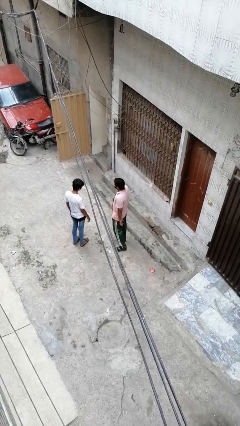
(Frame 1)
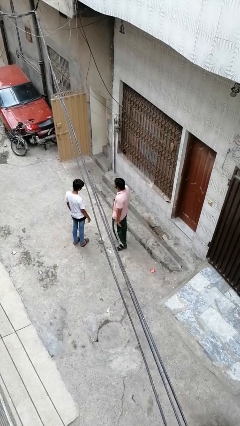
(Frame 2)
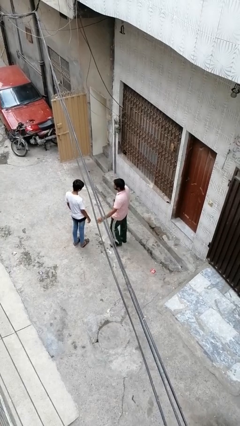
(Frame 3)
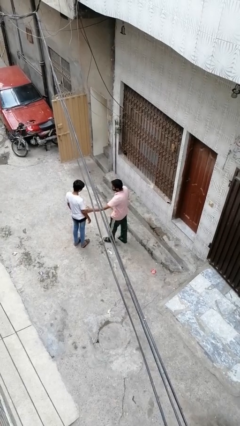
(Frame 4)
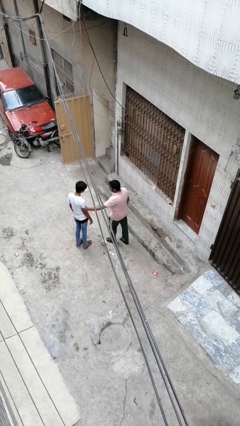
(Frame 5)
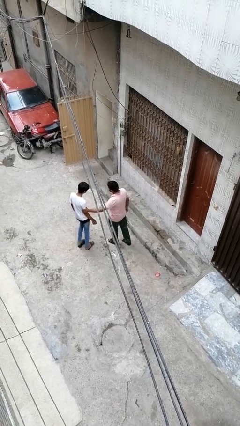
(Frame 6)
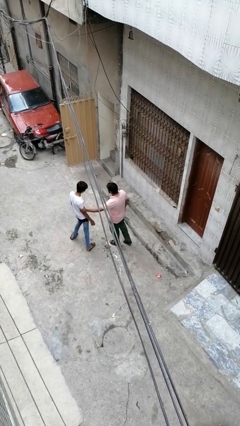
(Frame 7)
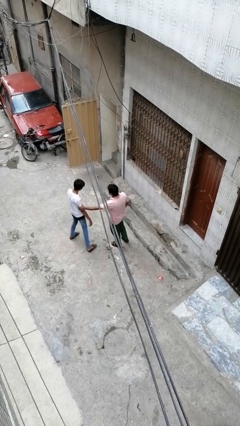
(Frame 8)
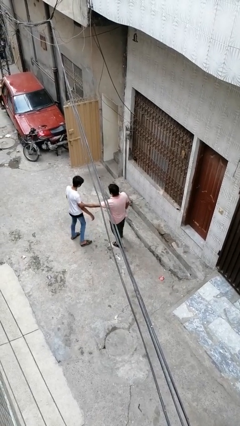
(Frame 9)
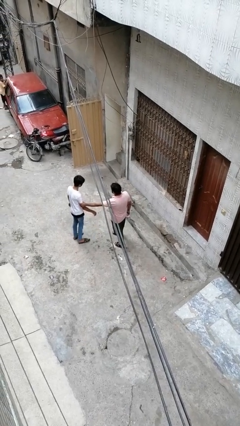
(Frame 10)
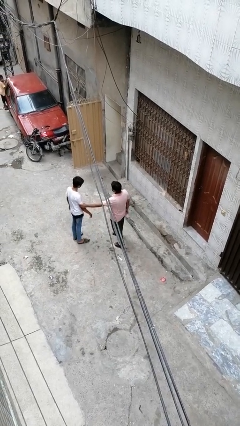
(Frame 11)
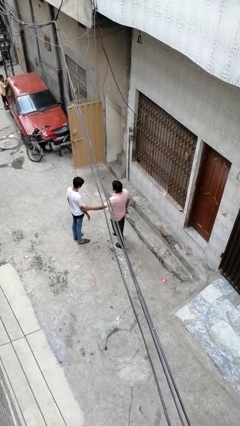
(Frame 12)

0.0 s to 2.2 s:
person grabs person by bicep

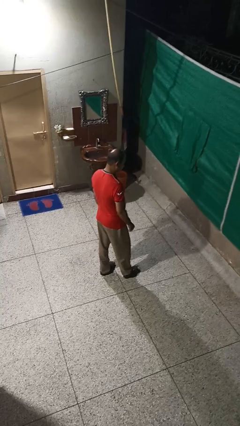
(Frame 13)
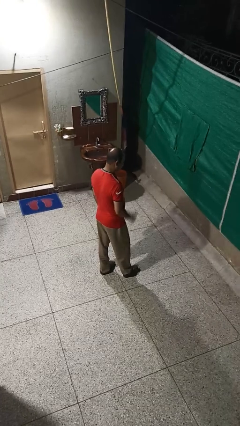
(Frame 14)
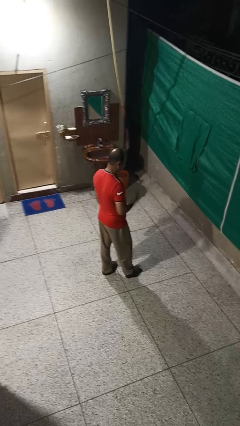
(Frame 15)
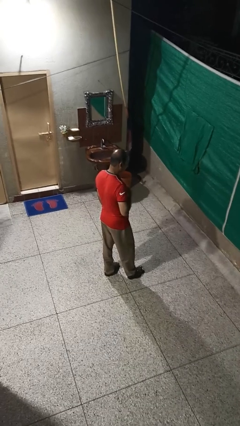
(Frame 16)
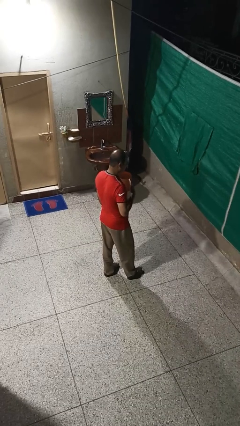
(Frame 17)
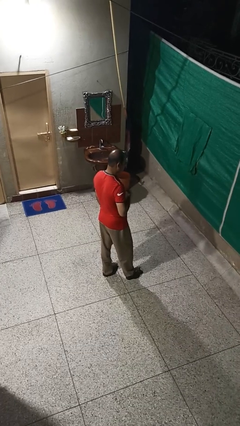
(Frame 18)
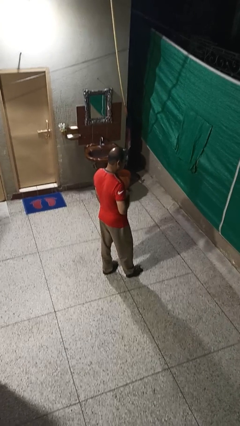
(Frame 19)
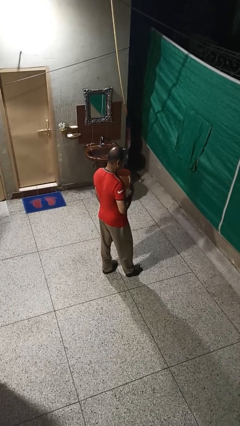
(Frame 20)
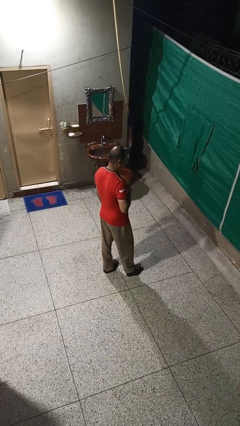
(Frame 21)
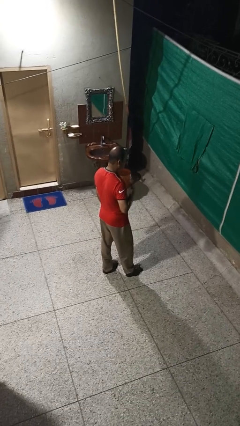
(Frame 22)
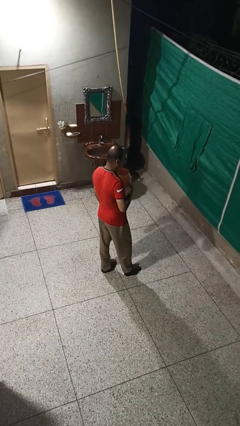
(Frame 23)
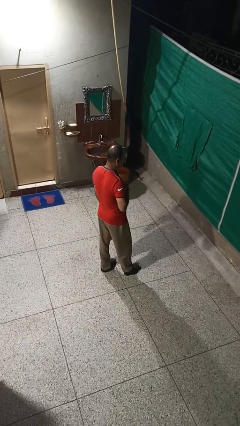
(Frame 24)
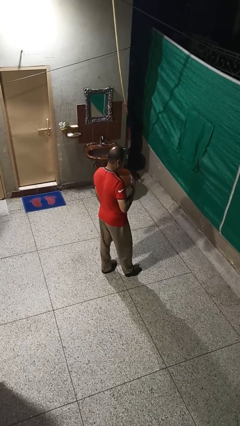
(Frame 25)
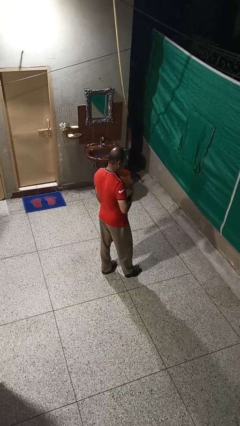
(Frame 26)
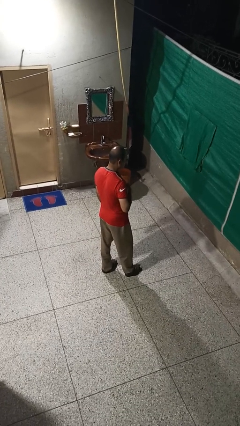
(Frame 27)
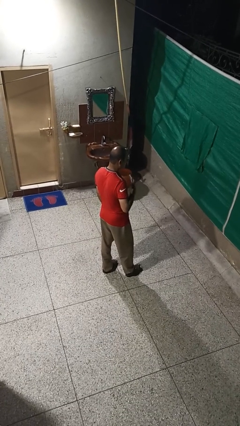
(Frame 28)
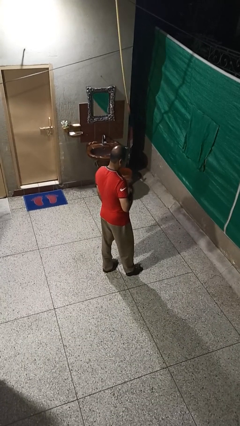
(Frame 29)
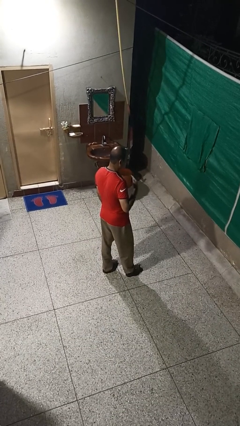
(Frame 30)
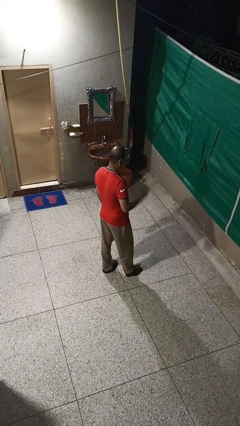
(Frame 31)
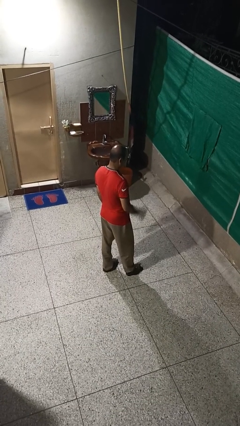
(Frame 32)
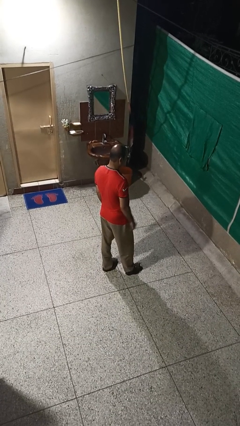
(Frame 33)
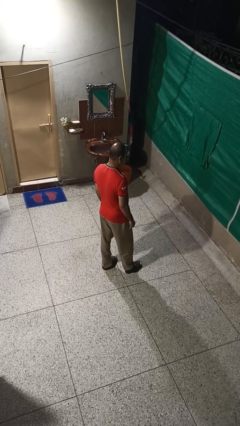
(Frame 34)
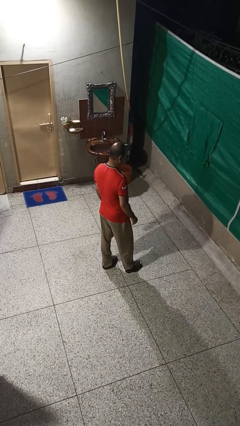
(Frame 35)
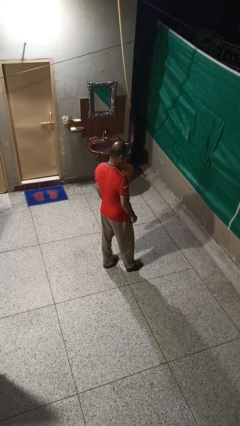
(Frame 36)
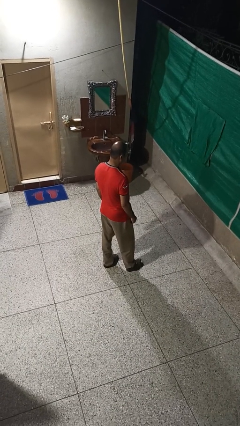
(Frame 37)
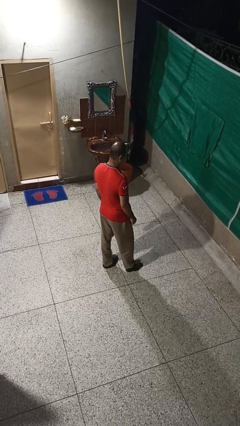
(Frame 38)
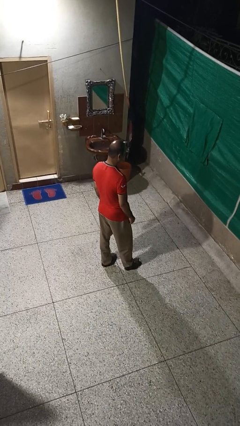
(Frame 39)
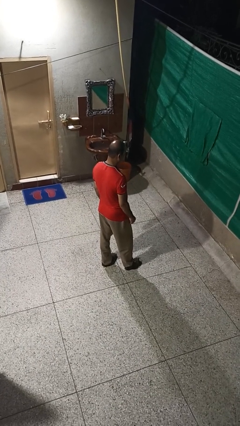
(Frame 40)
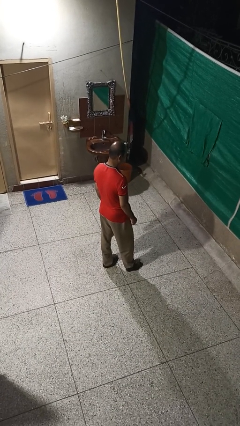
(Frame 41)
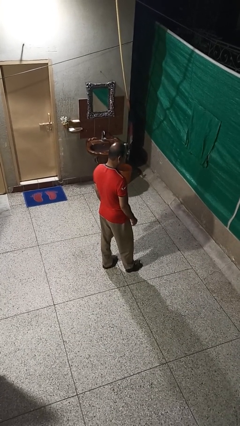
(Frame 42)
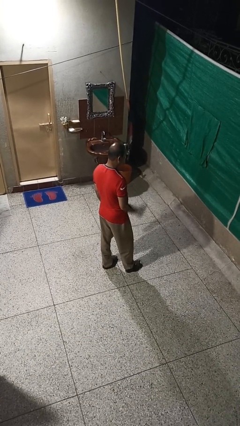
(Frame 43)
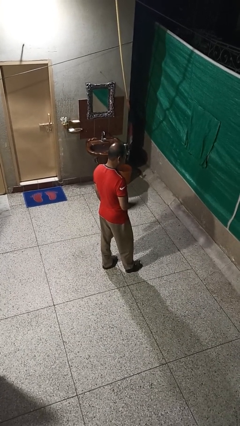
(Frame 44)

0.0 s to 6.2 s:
person drums on chest

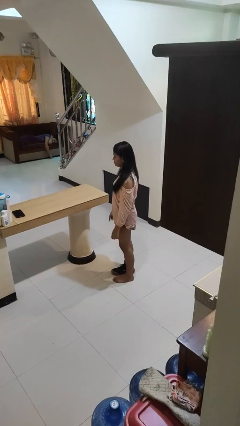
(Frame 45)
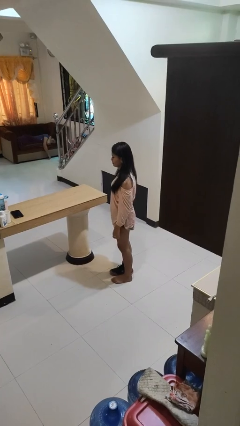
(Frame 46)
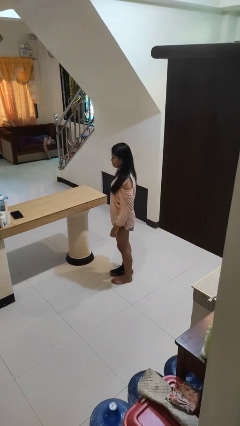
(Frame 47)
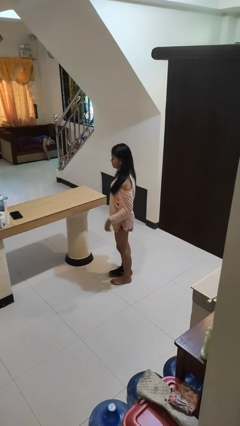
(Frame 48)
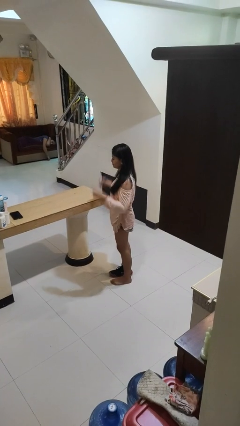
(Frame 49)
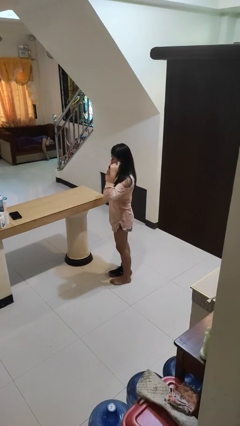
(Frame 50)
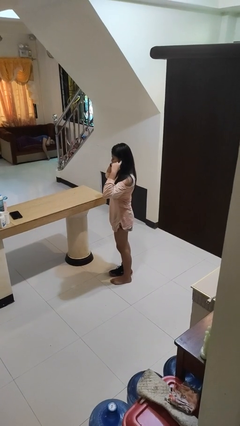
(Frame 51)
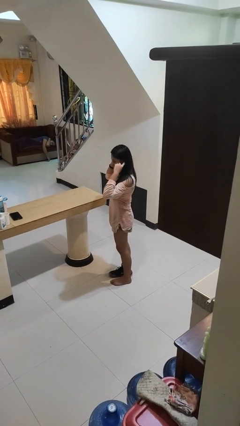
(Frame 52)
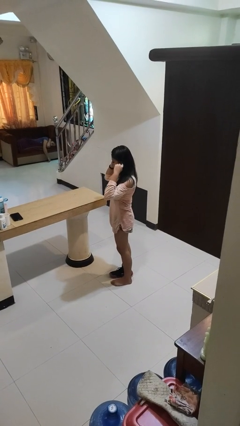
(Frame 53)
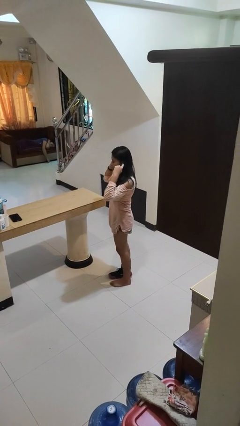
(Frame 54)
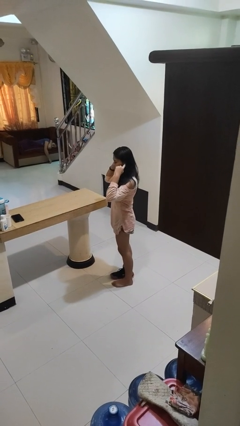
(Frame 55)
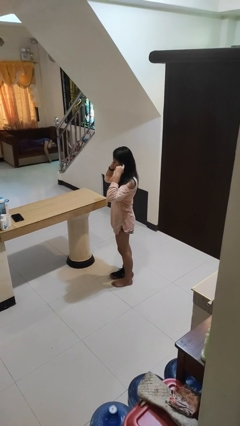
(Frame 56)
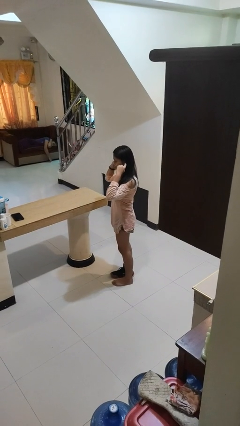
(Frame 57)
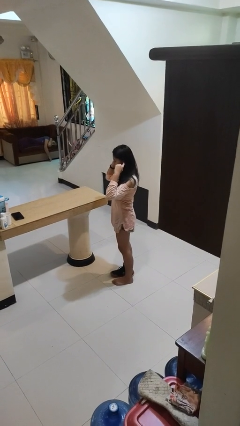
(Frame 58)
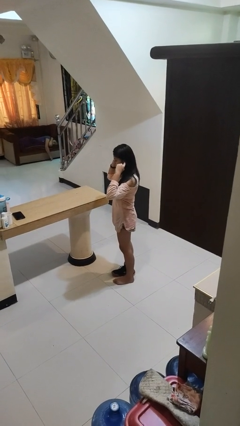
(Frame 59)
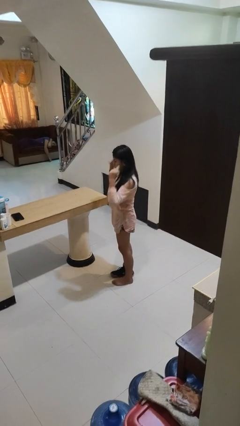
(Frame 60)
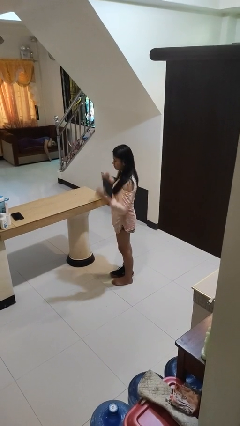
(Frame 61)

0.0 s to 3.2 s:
person puts fingers in ear

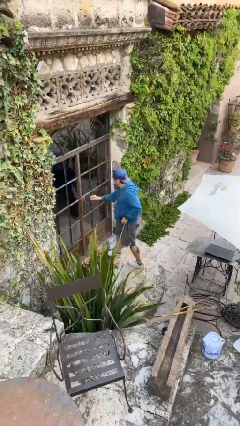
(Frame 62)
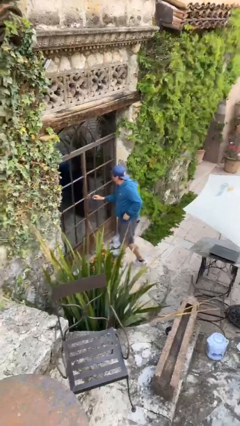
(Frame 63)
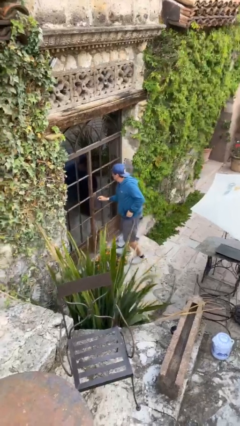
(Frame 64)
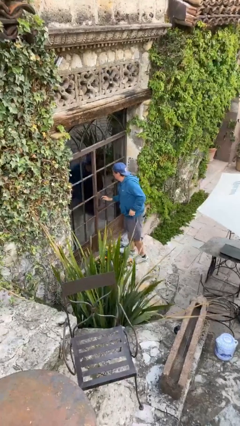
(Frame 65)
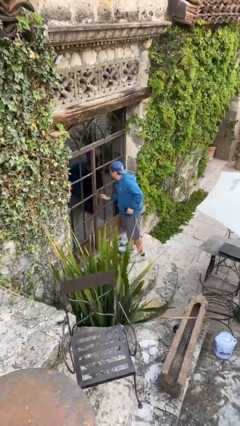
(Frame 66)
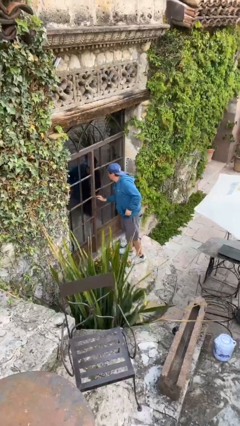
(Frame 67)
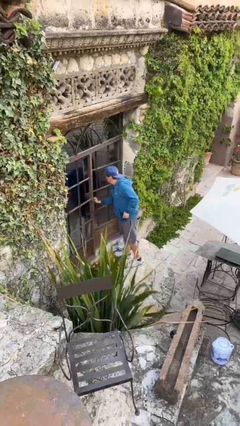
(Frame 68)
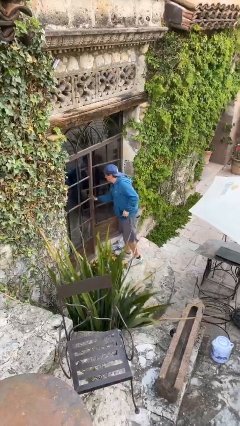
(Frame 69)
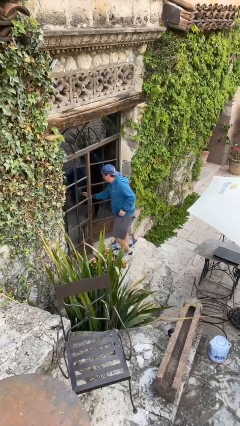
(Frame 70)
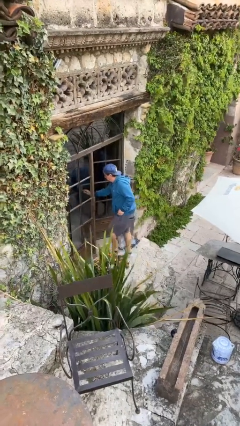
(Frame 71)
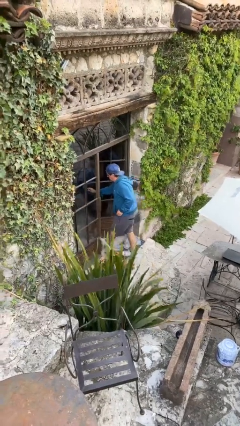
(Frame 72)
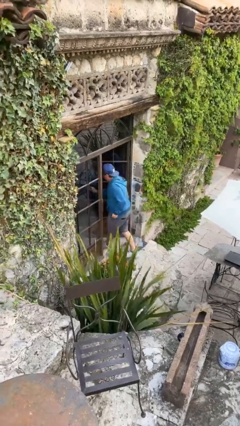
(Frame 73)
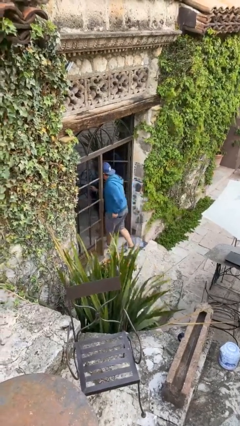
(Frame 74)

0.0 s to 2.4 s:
person opens facility door

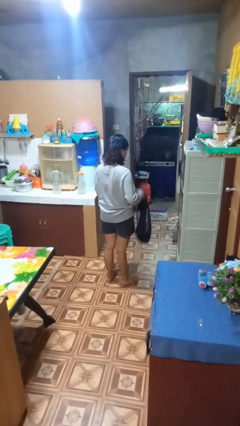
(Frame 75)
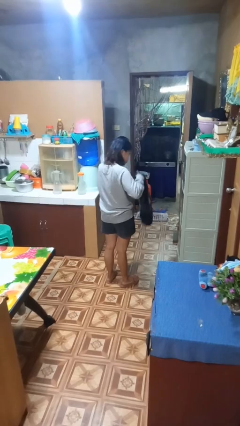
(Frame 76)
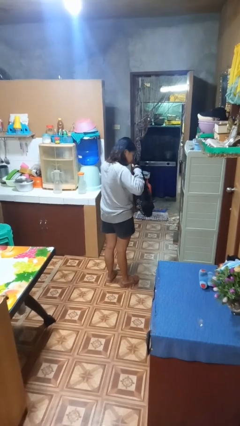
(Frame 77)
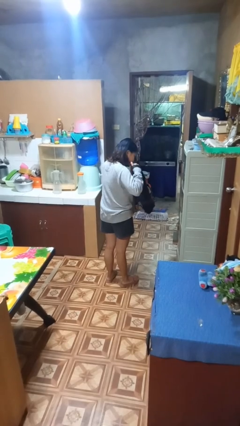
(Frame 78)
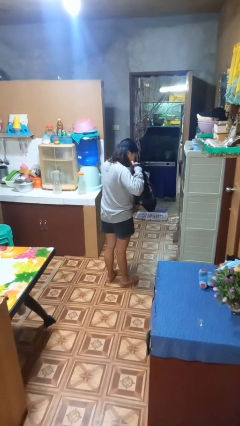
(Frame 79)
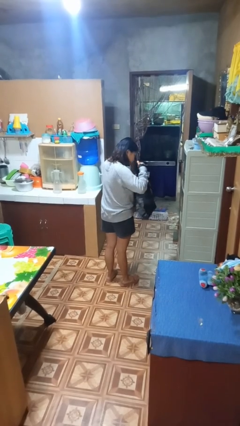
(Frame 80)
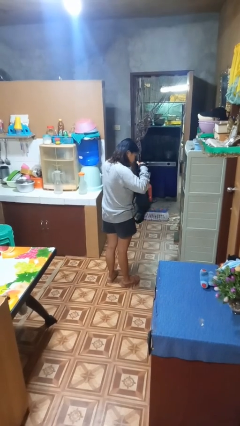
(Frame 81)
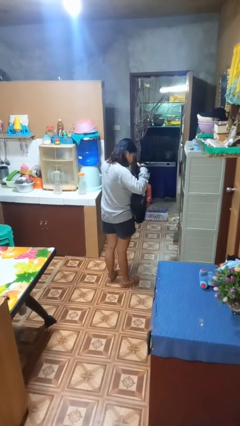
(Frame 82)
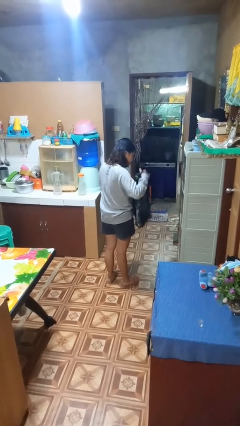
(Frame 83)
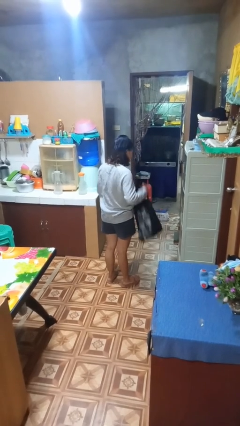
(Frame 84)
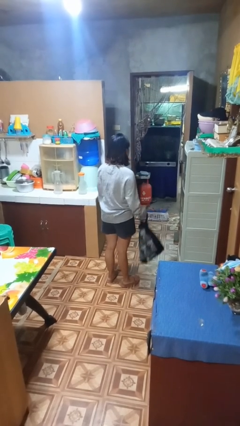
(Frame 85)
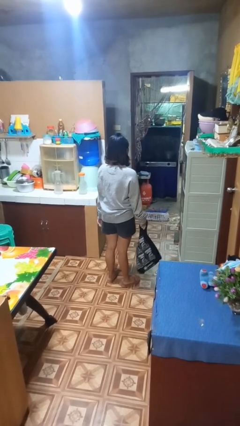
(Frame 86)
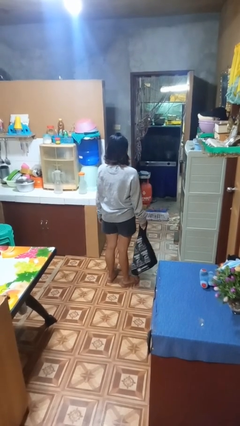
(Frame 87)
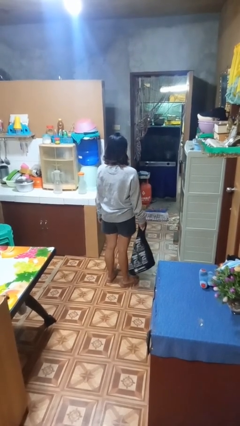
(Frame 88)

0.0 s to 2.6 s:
person searches in bag

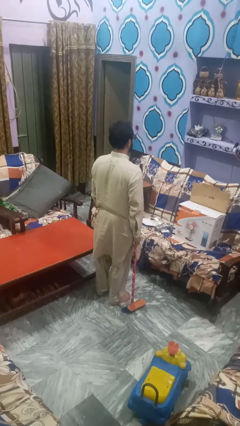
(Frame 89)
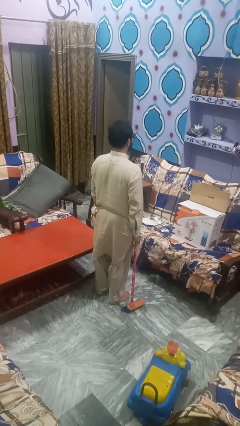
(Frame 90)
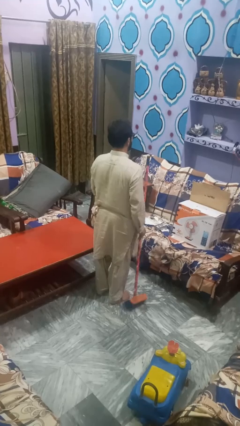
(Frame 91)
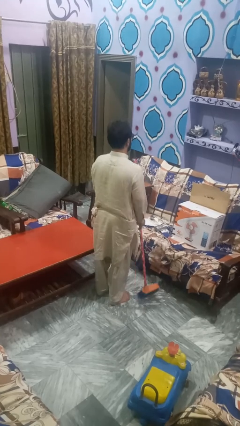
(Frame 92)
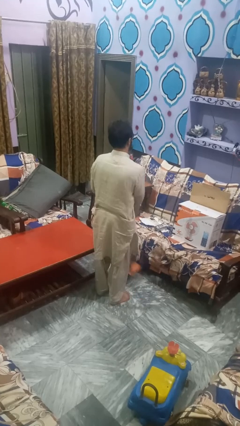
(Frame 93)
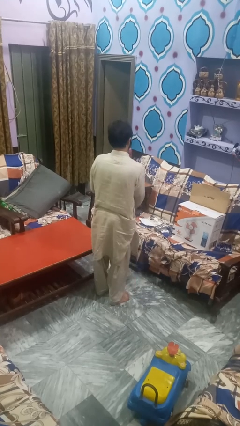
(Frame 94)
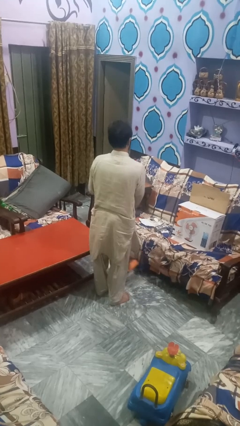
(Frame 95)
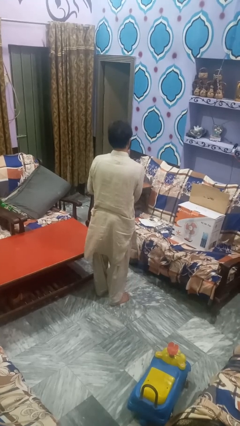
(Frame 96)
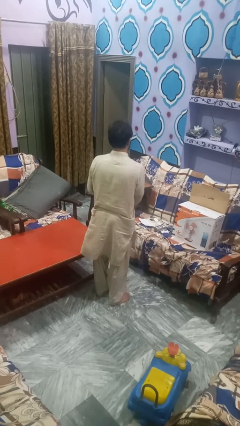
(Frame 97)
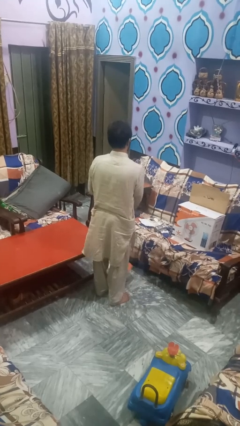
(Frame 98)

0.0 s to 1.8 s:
person mops
